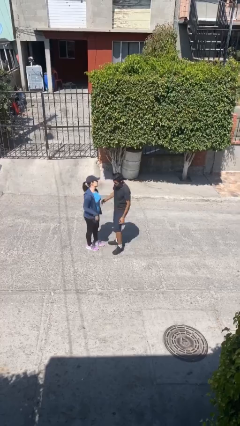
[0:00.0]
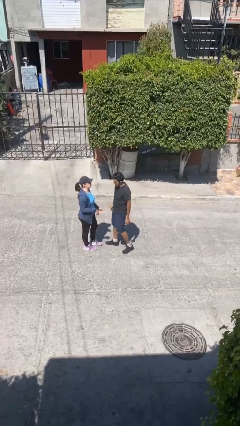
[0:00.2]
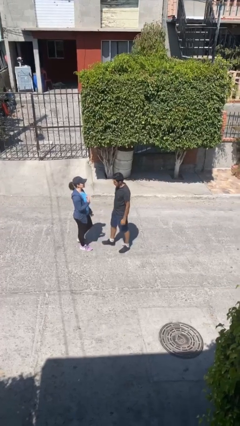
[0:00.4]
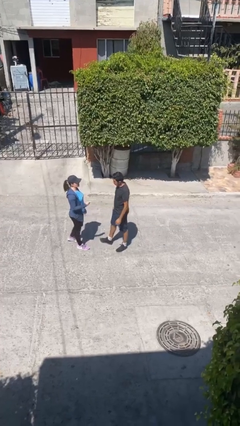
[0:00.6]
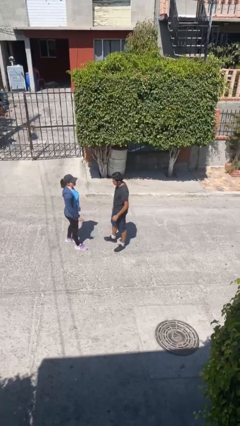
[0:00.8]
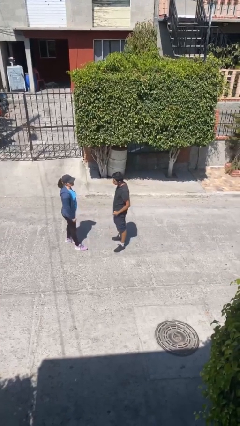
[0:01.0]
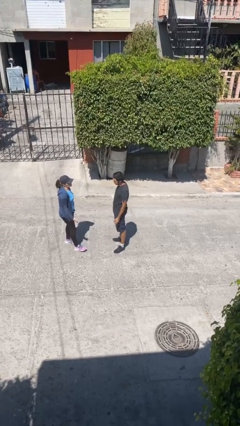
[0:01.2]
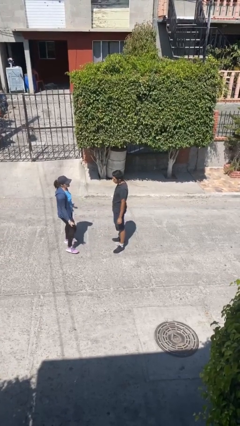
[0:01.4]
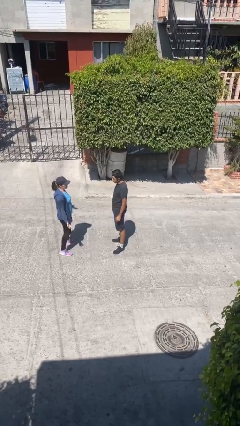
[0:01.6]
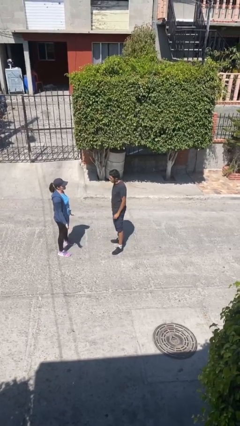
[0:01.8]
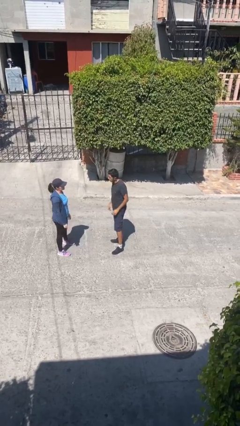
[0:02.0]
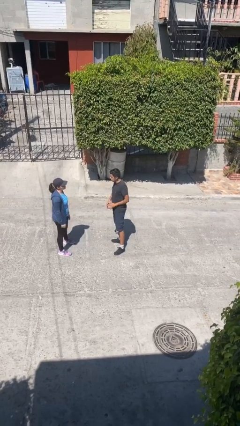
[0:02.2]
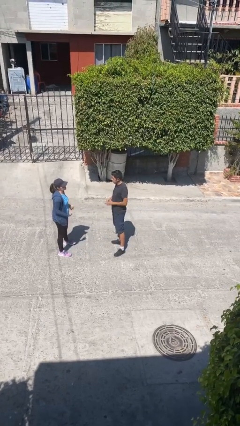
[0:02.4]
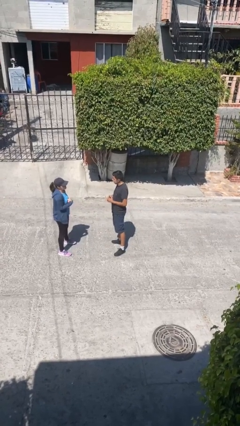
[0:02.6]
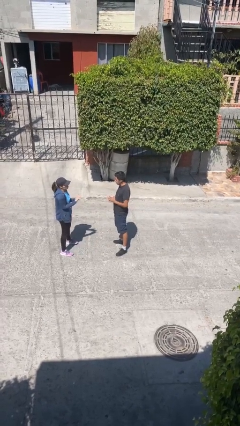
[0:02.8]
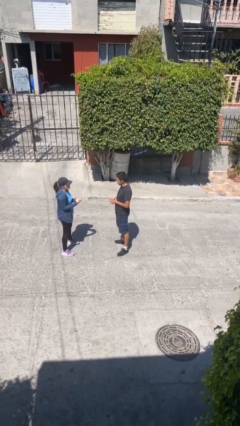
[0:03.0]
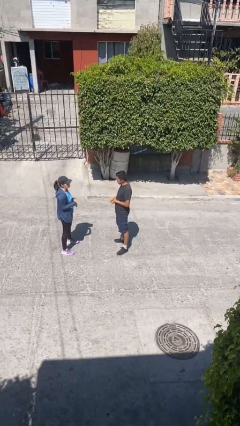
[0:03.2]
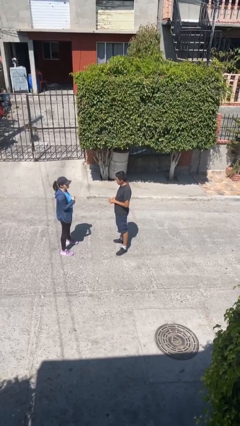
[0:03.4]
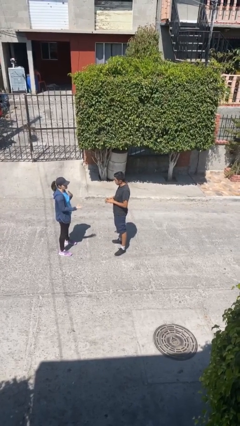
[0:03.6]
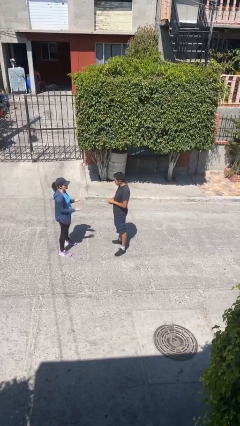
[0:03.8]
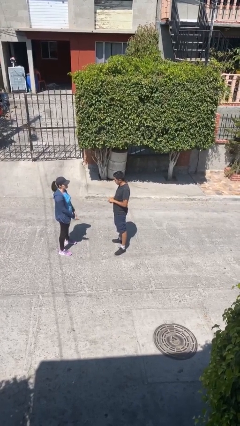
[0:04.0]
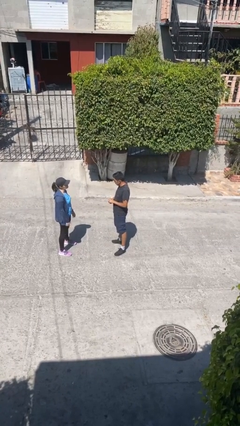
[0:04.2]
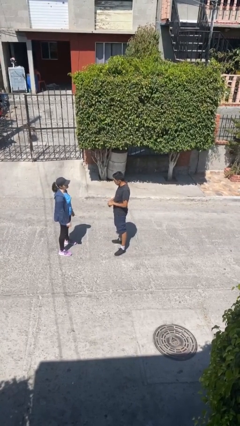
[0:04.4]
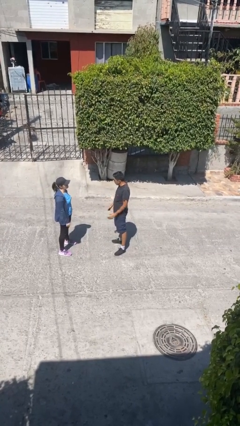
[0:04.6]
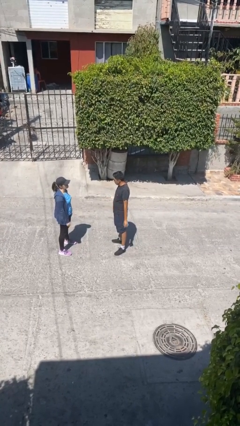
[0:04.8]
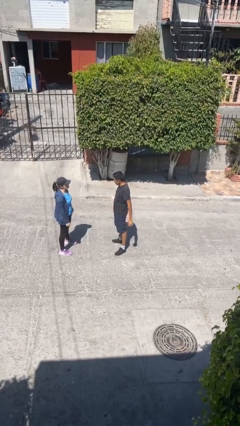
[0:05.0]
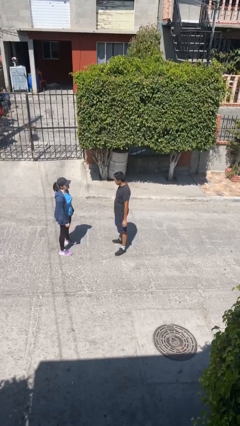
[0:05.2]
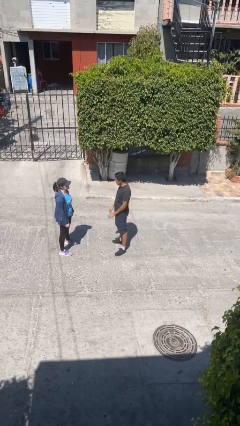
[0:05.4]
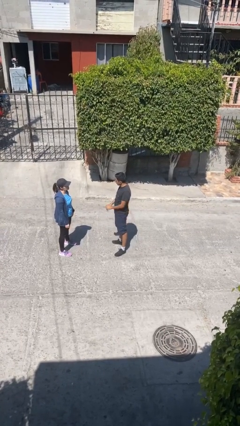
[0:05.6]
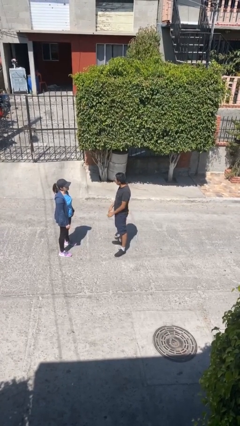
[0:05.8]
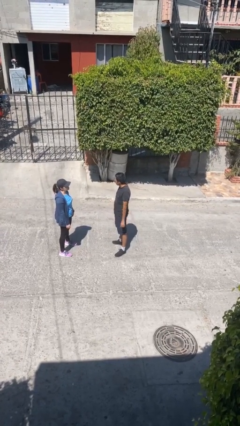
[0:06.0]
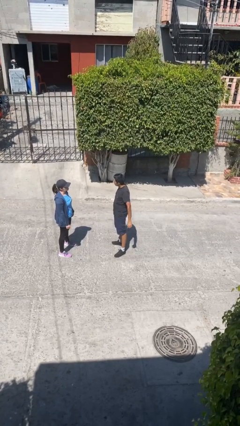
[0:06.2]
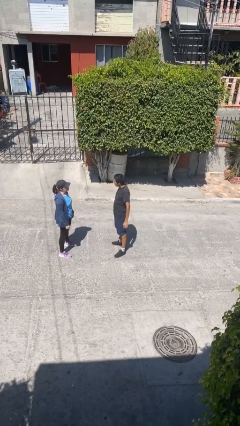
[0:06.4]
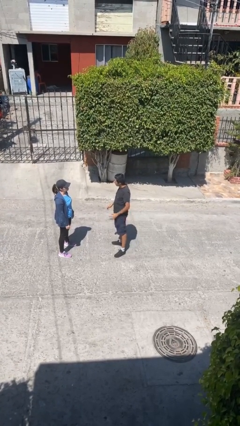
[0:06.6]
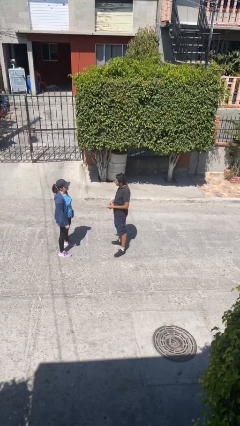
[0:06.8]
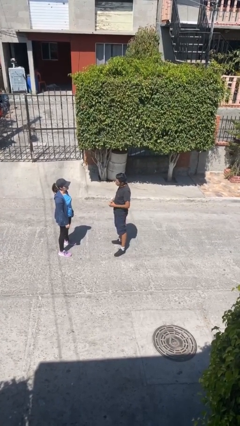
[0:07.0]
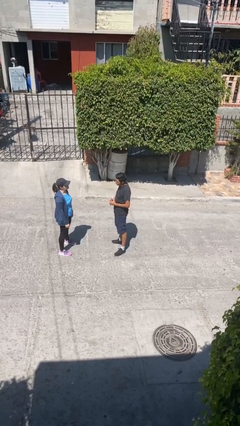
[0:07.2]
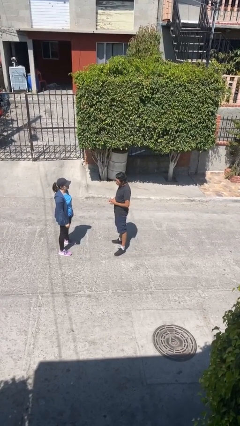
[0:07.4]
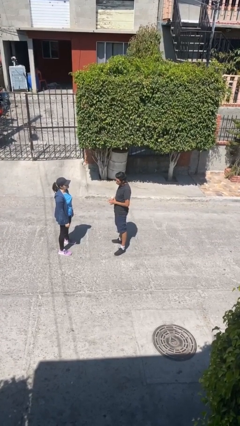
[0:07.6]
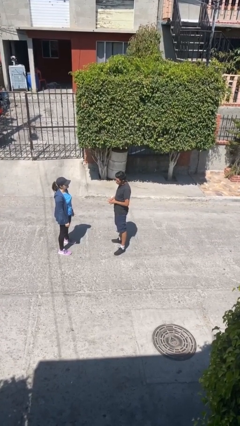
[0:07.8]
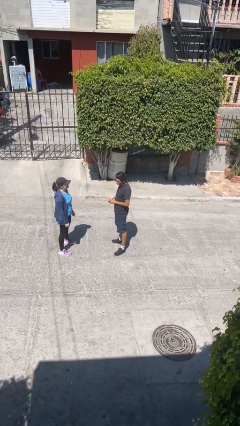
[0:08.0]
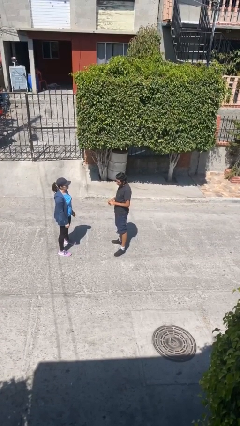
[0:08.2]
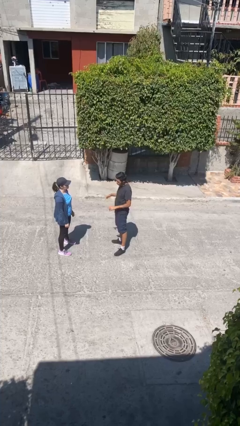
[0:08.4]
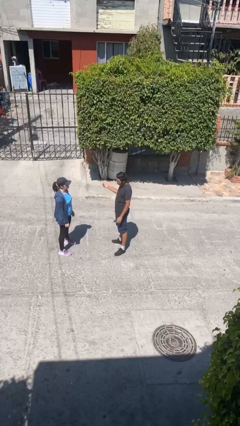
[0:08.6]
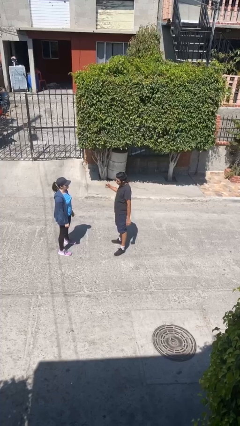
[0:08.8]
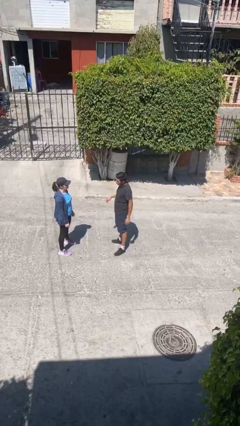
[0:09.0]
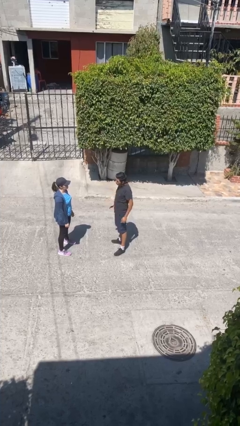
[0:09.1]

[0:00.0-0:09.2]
person talks to person

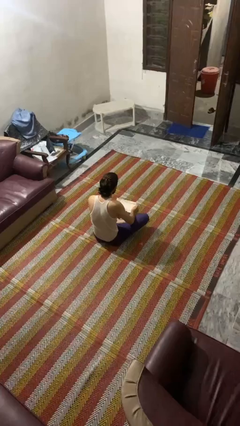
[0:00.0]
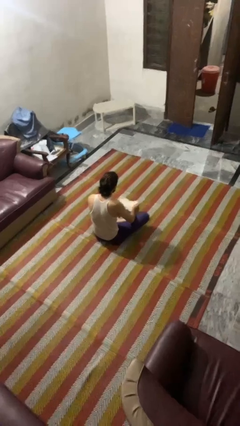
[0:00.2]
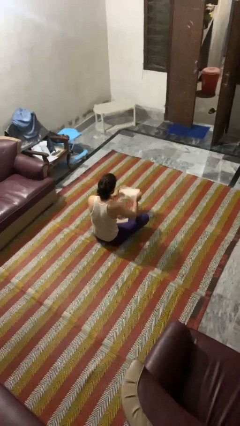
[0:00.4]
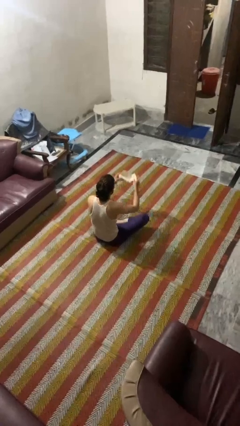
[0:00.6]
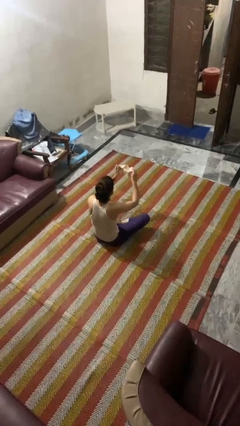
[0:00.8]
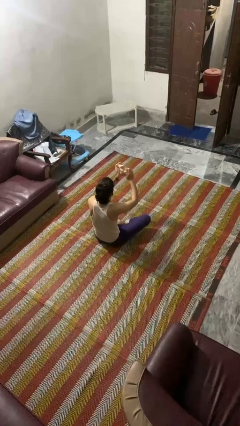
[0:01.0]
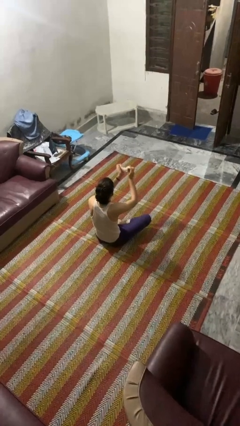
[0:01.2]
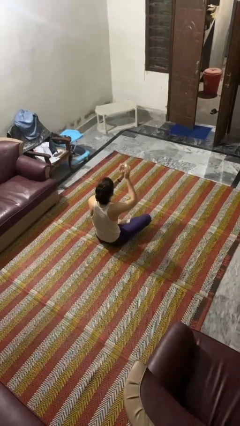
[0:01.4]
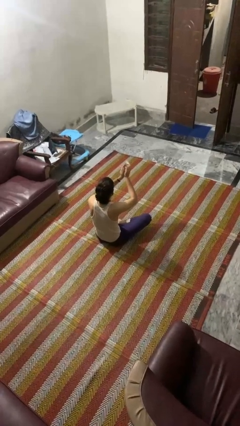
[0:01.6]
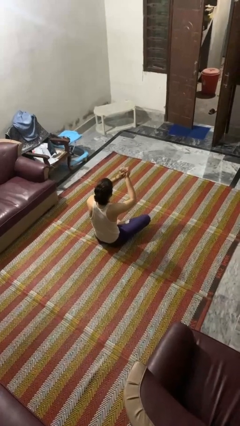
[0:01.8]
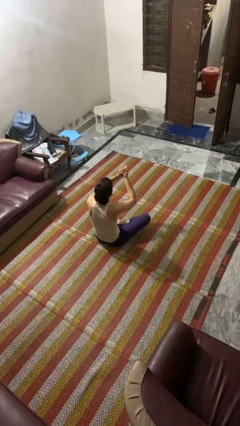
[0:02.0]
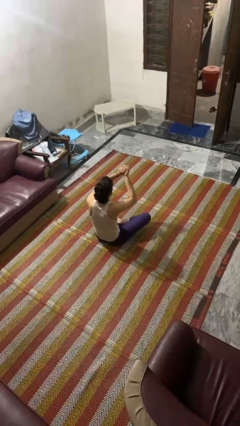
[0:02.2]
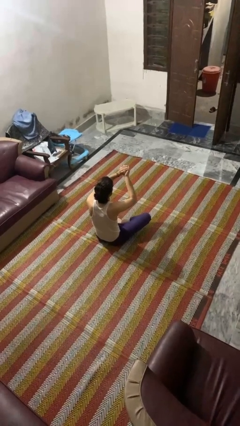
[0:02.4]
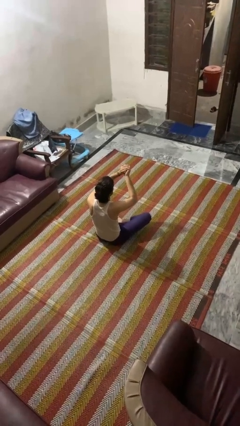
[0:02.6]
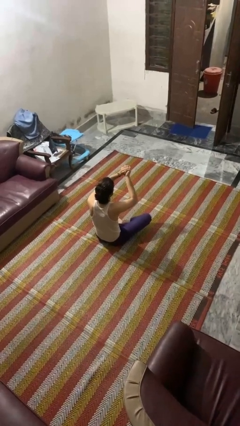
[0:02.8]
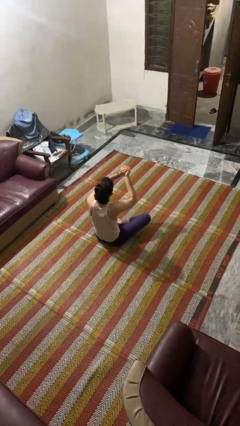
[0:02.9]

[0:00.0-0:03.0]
person crumples paper

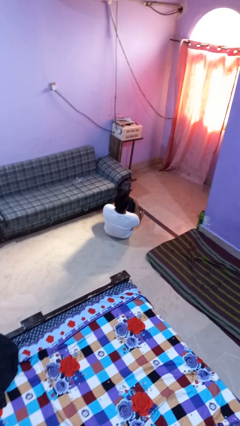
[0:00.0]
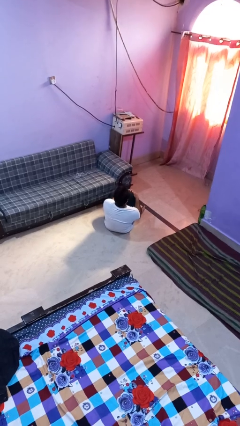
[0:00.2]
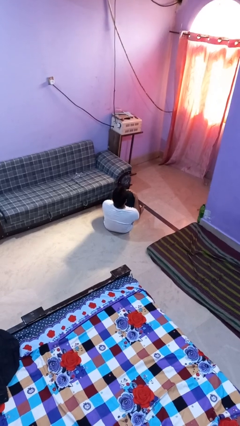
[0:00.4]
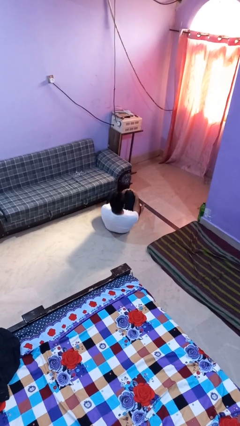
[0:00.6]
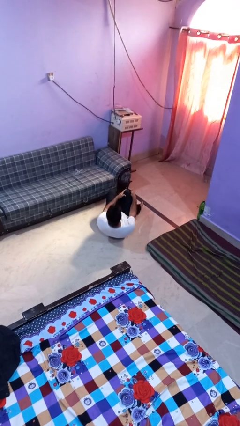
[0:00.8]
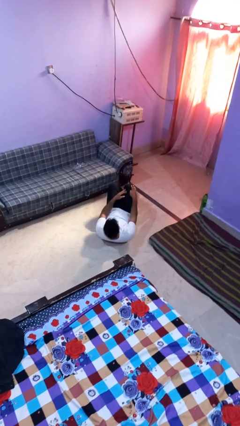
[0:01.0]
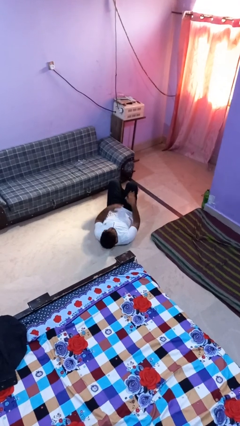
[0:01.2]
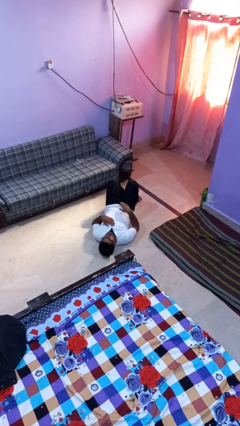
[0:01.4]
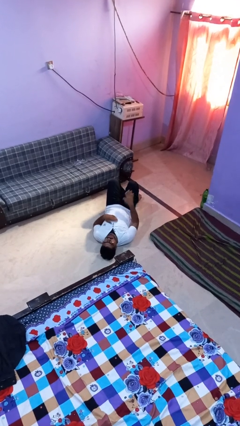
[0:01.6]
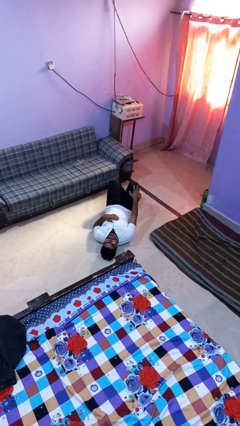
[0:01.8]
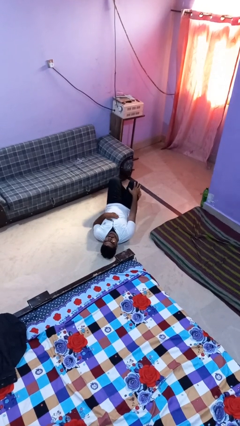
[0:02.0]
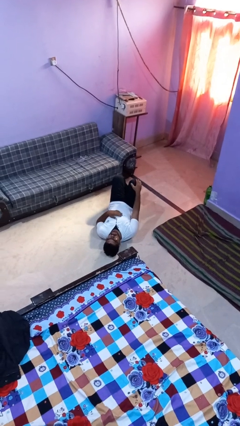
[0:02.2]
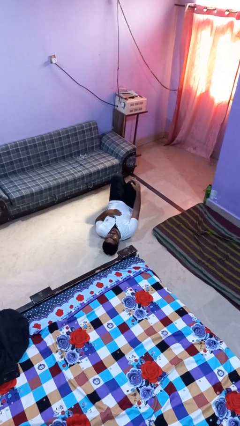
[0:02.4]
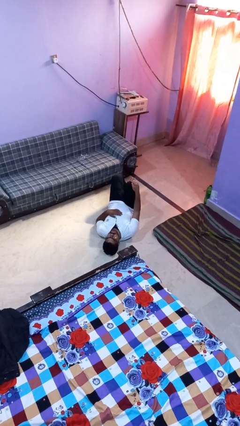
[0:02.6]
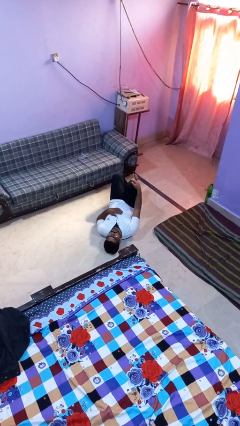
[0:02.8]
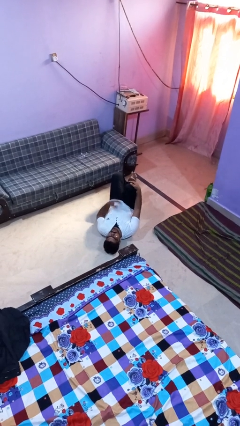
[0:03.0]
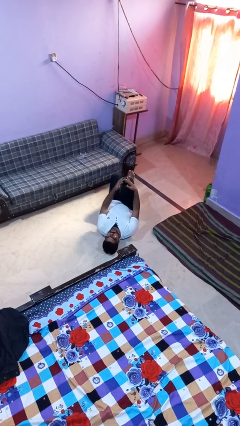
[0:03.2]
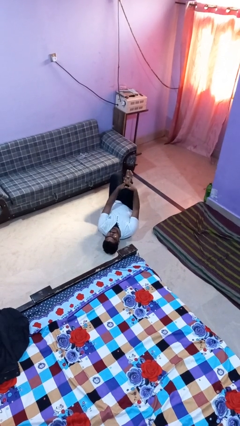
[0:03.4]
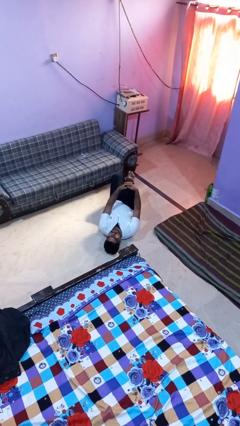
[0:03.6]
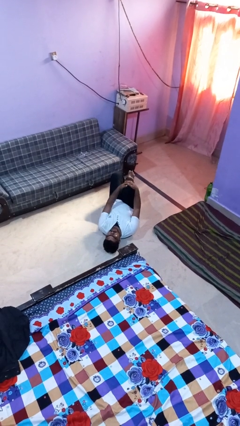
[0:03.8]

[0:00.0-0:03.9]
person lies down on floor

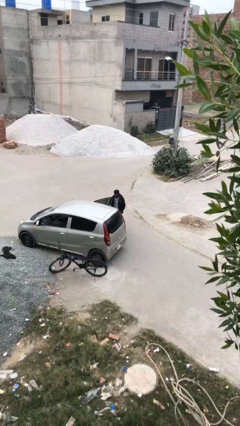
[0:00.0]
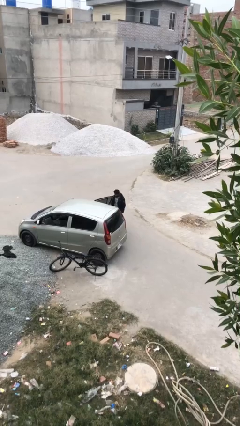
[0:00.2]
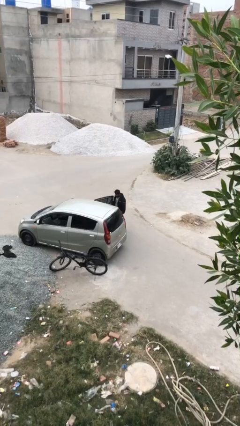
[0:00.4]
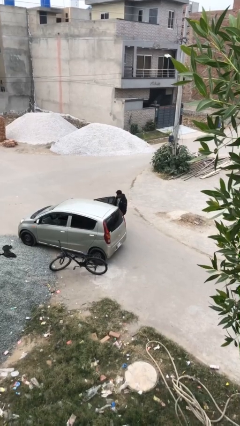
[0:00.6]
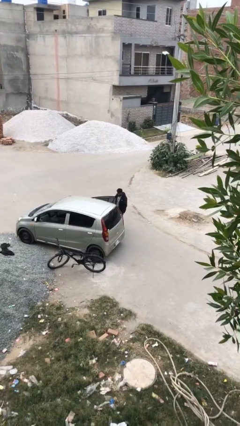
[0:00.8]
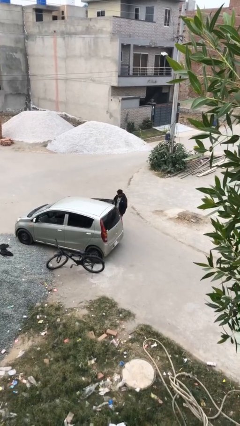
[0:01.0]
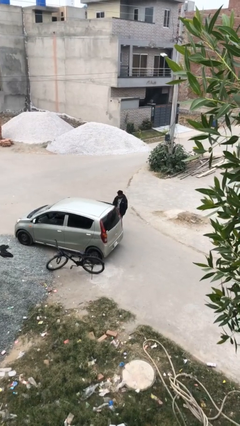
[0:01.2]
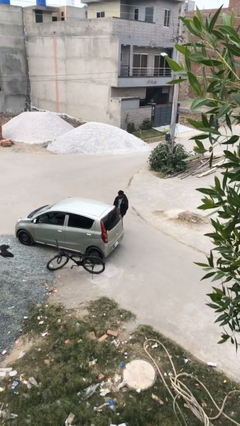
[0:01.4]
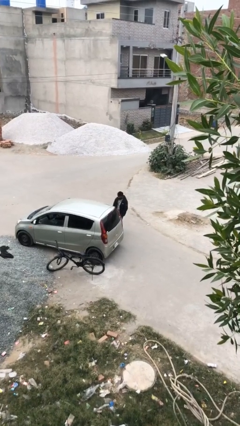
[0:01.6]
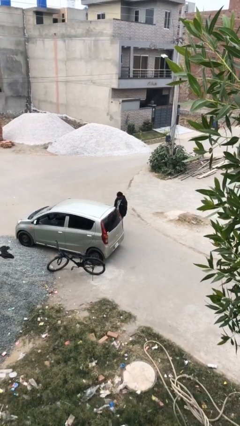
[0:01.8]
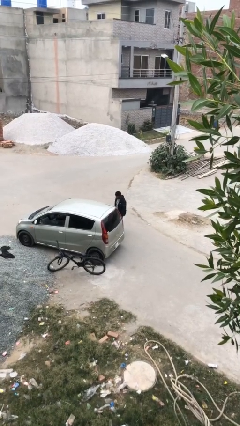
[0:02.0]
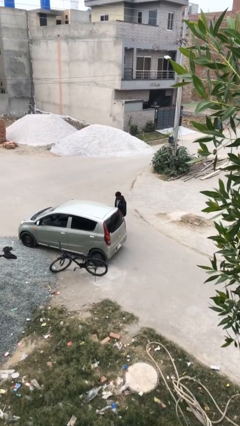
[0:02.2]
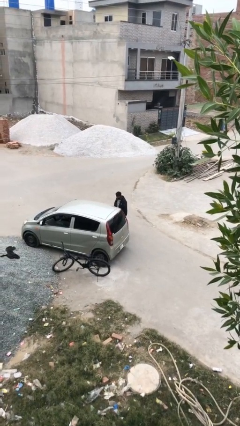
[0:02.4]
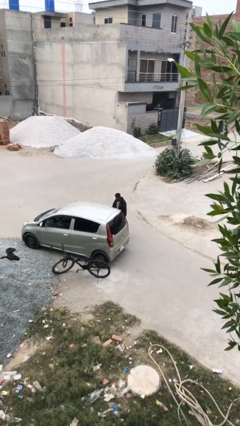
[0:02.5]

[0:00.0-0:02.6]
person closes car door
